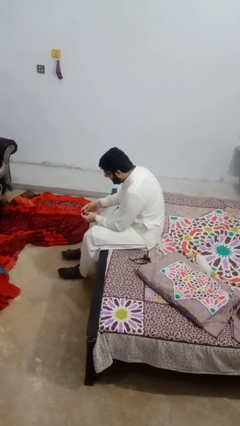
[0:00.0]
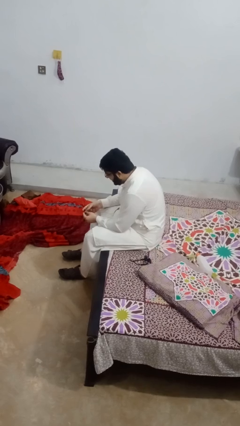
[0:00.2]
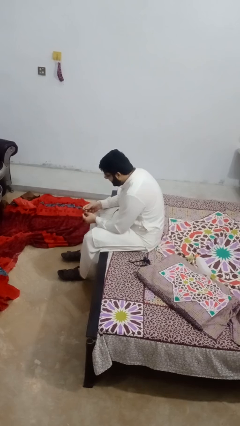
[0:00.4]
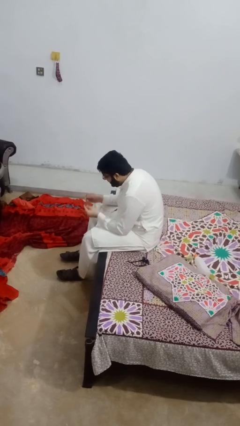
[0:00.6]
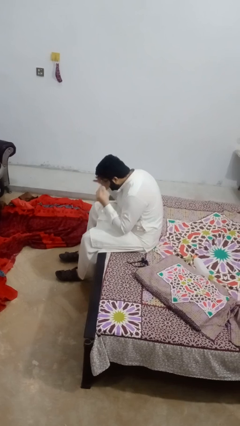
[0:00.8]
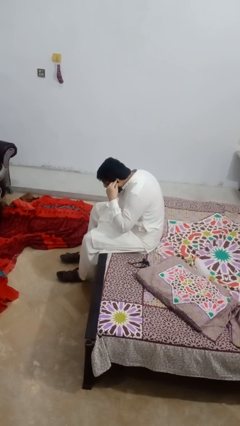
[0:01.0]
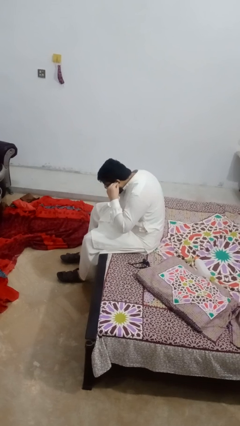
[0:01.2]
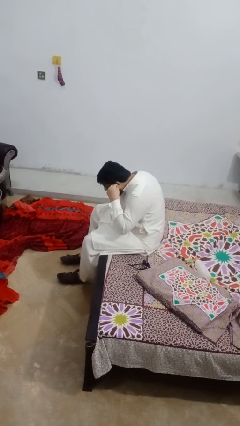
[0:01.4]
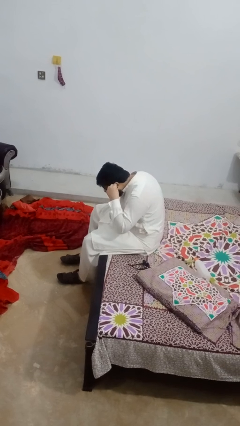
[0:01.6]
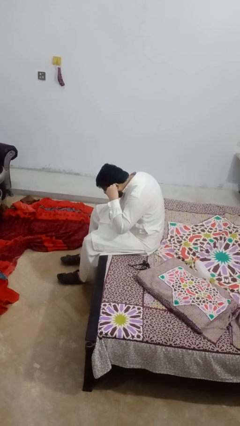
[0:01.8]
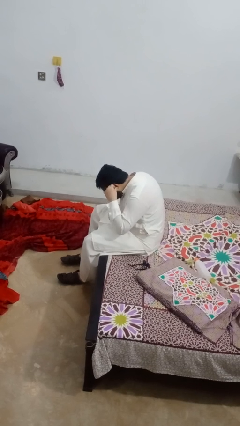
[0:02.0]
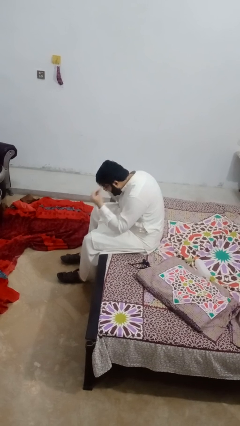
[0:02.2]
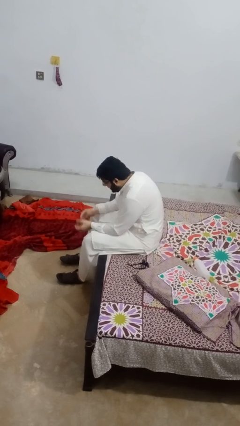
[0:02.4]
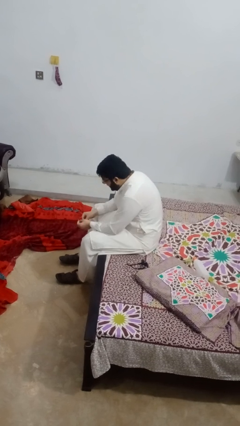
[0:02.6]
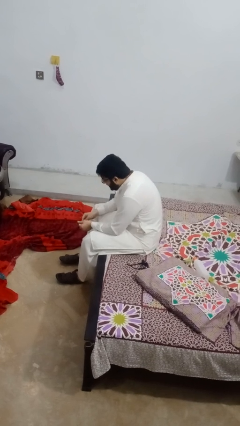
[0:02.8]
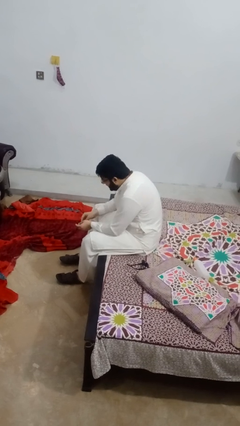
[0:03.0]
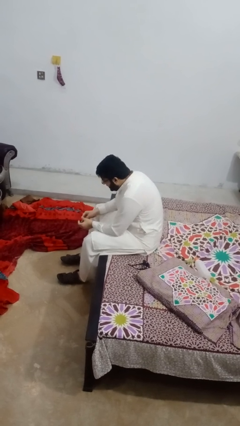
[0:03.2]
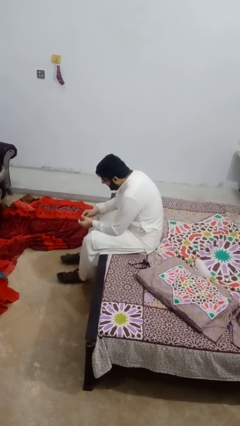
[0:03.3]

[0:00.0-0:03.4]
person puts on headphones

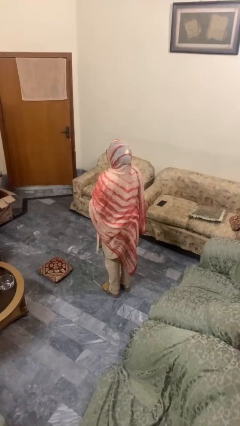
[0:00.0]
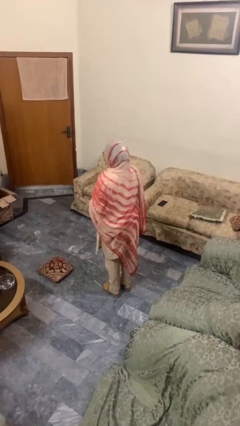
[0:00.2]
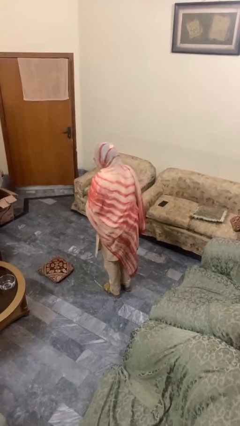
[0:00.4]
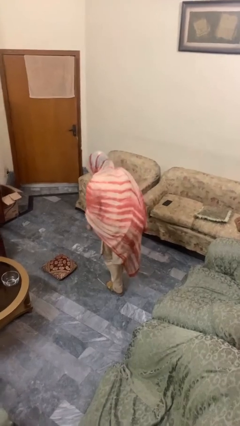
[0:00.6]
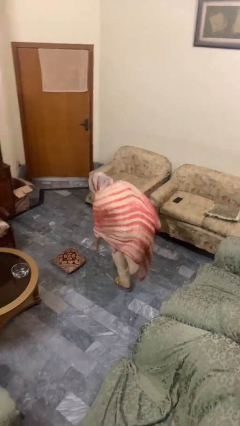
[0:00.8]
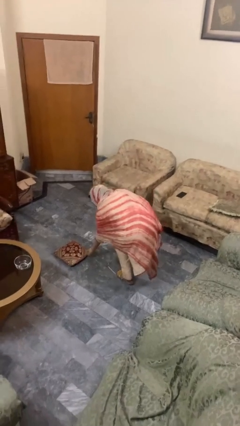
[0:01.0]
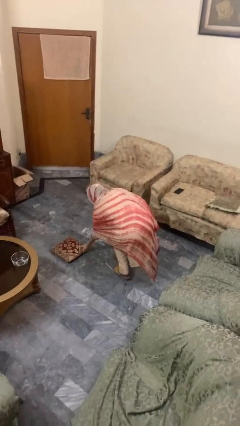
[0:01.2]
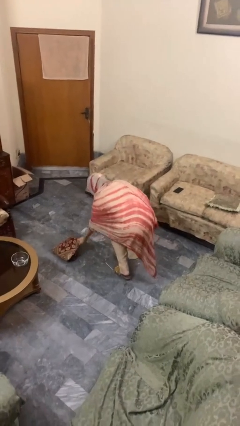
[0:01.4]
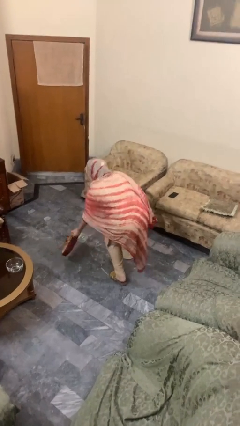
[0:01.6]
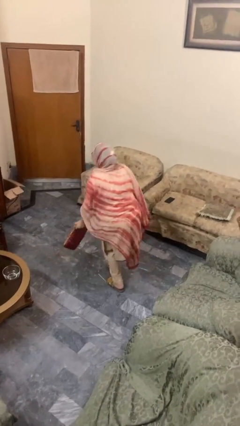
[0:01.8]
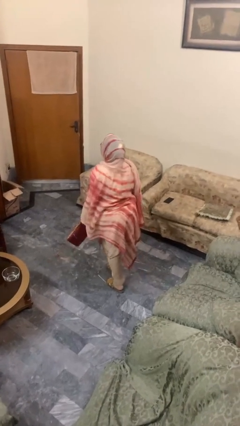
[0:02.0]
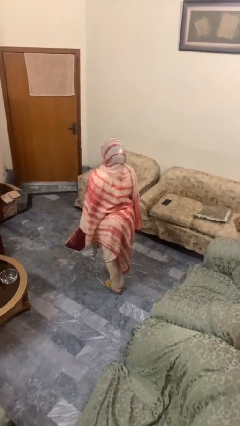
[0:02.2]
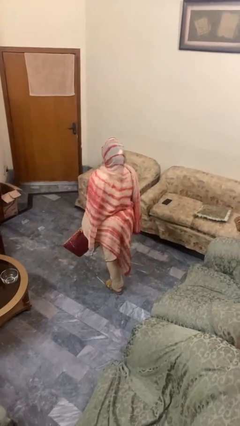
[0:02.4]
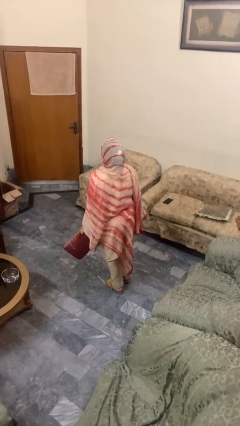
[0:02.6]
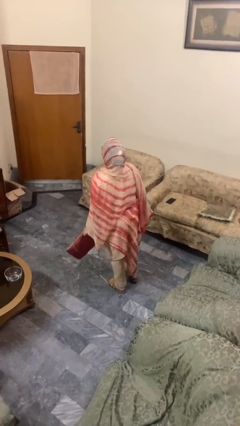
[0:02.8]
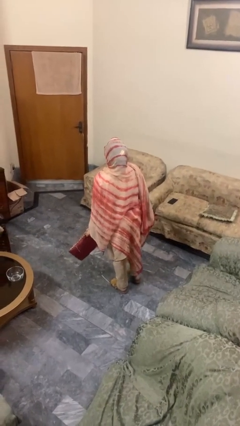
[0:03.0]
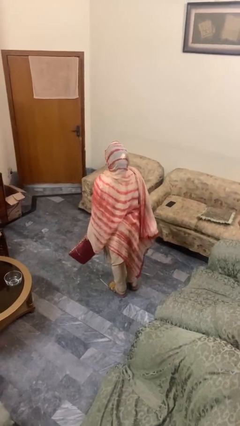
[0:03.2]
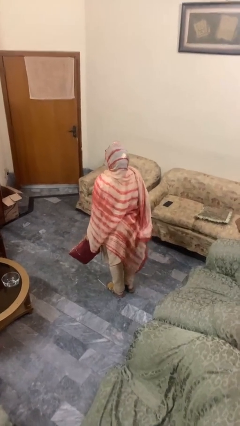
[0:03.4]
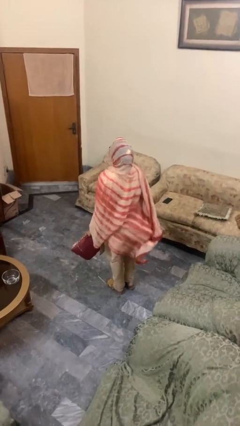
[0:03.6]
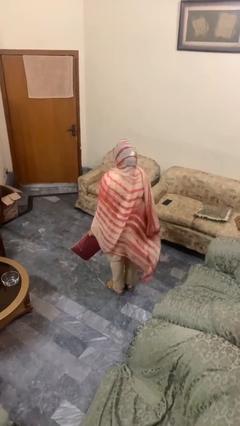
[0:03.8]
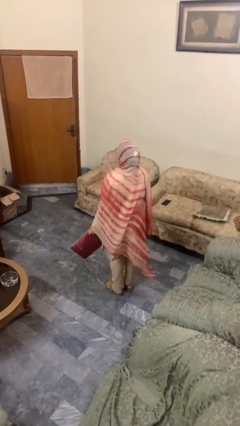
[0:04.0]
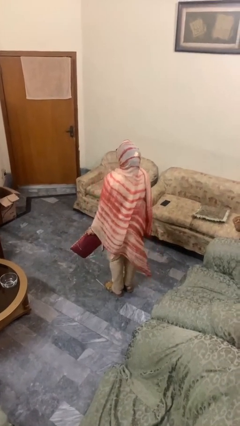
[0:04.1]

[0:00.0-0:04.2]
person picks up object from floor

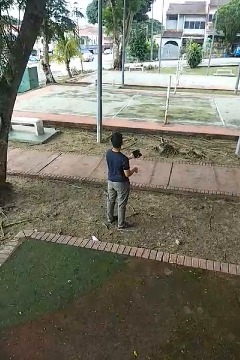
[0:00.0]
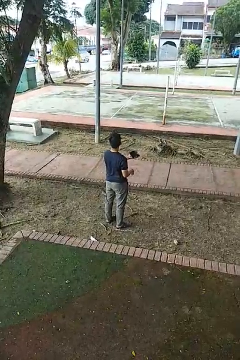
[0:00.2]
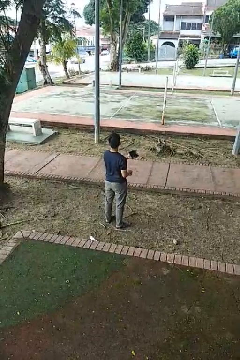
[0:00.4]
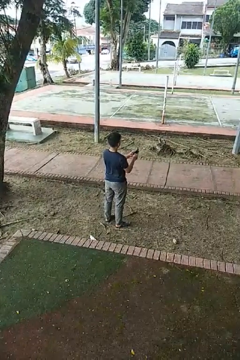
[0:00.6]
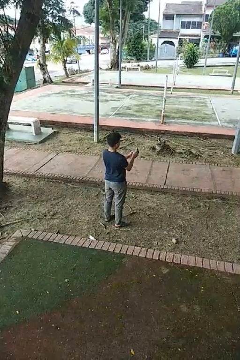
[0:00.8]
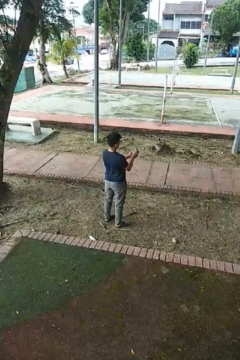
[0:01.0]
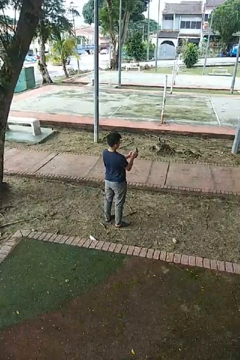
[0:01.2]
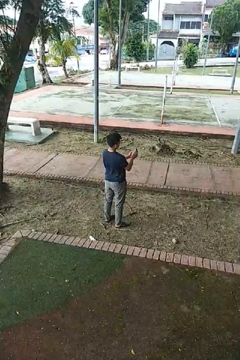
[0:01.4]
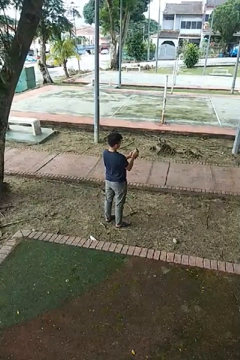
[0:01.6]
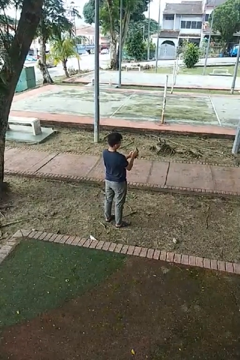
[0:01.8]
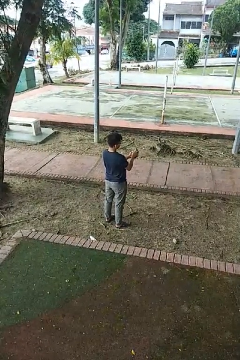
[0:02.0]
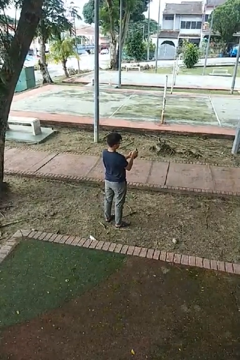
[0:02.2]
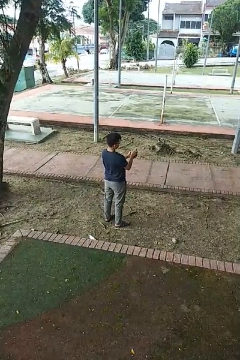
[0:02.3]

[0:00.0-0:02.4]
person searches in purse

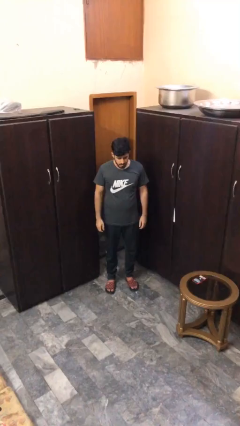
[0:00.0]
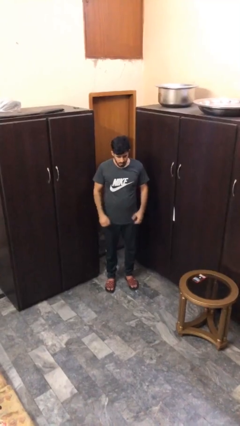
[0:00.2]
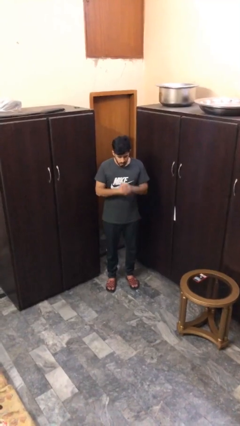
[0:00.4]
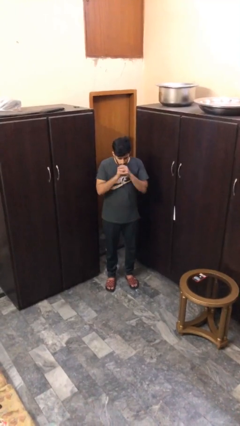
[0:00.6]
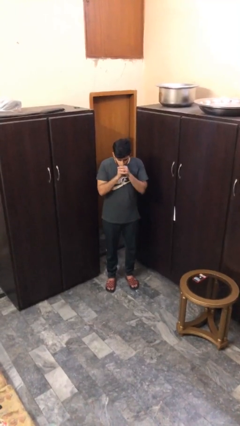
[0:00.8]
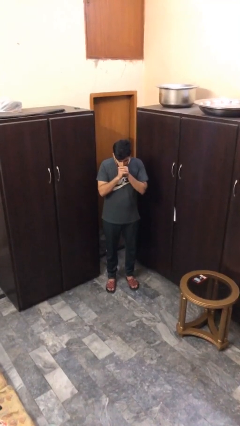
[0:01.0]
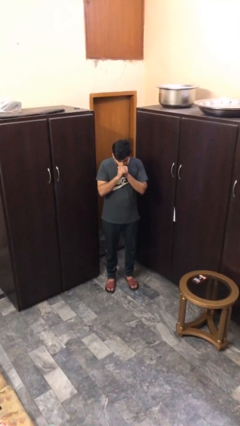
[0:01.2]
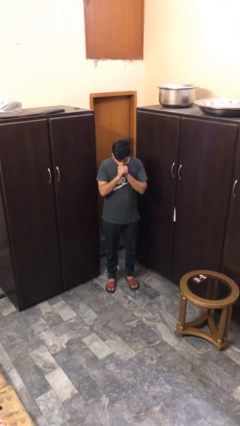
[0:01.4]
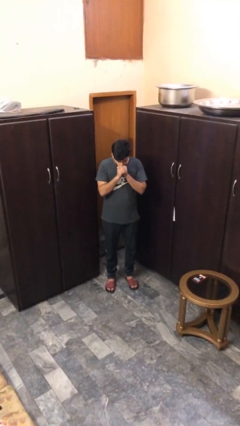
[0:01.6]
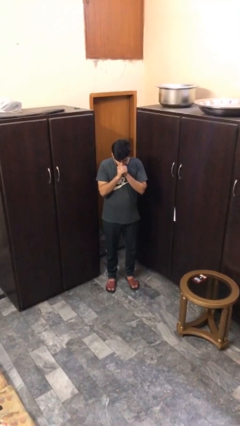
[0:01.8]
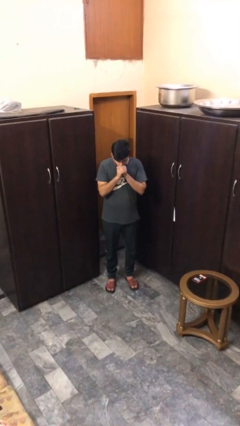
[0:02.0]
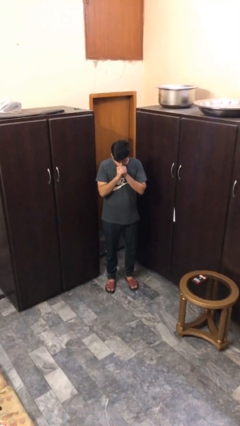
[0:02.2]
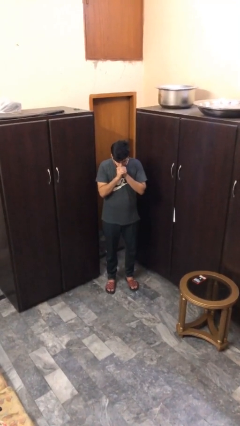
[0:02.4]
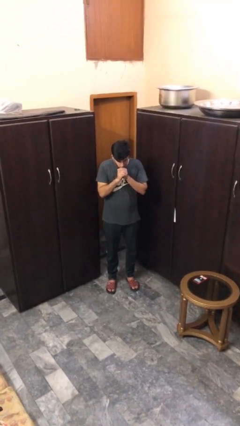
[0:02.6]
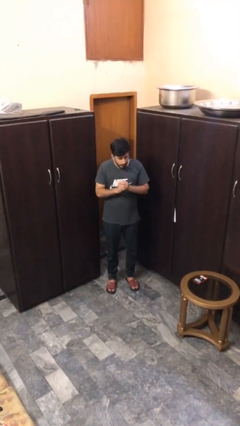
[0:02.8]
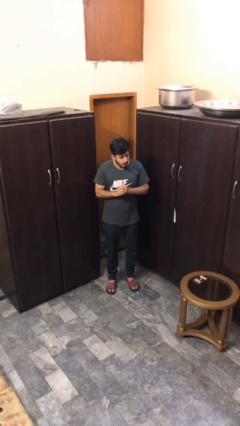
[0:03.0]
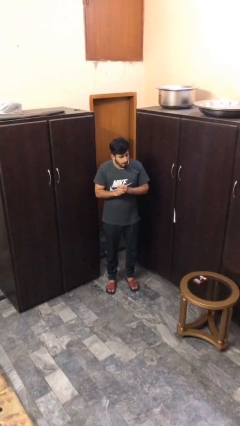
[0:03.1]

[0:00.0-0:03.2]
person blows into hands

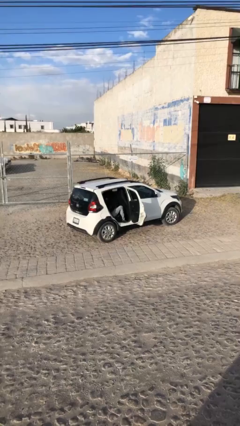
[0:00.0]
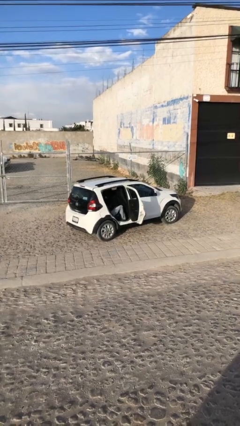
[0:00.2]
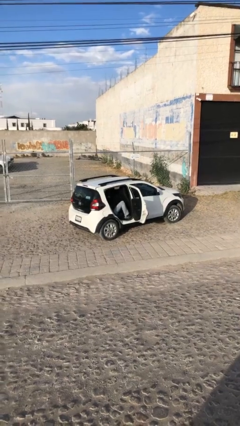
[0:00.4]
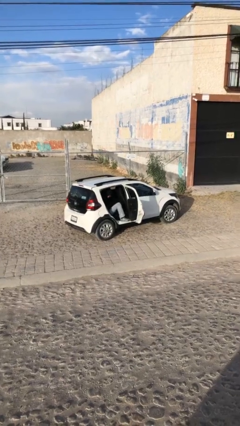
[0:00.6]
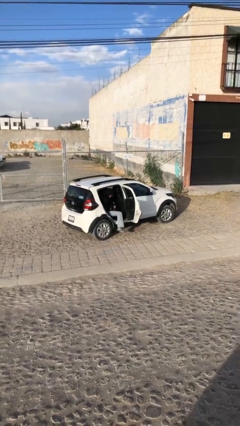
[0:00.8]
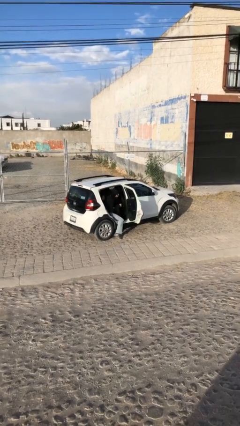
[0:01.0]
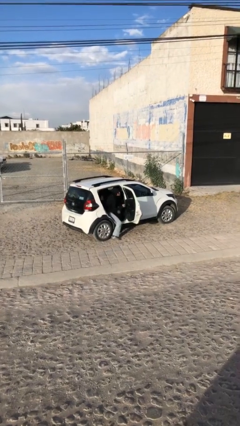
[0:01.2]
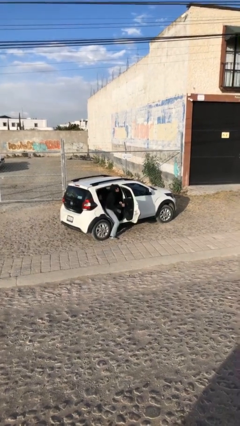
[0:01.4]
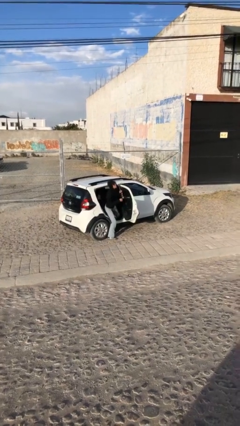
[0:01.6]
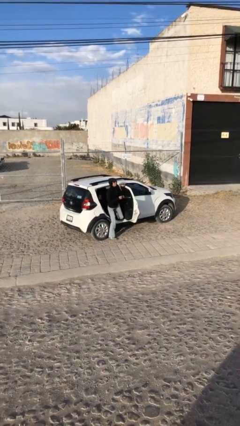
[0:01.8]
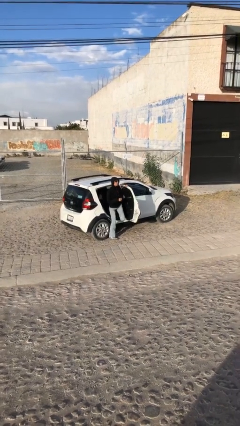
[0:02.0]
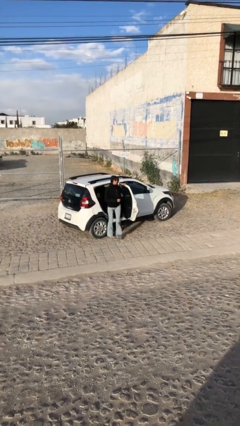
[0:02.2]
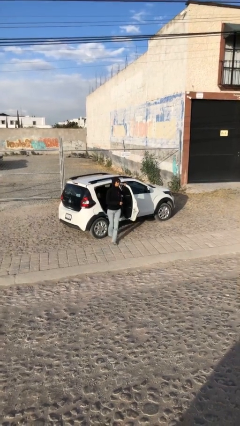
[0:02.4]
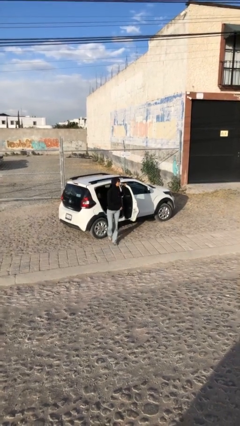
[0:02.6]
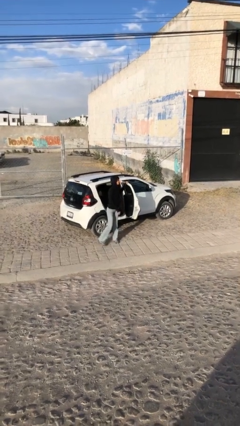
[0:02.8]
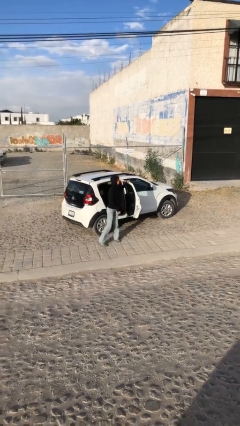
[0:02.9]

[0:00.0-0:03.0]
person exits car

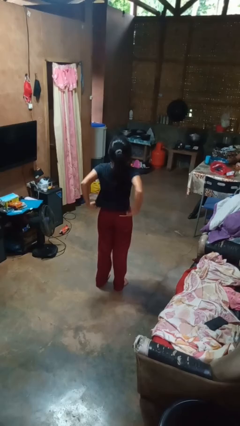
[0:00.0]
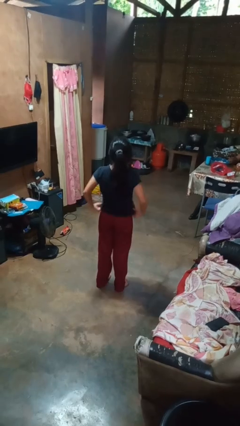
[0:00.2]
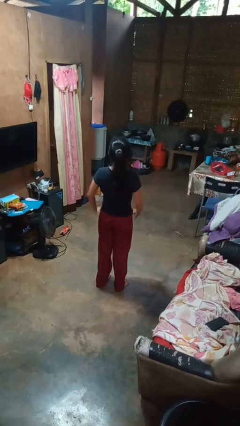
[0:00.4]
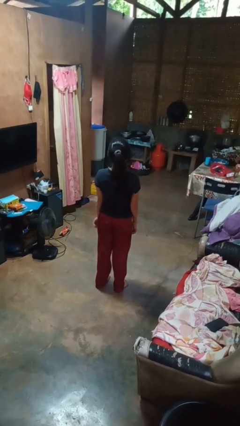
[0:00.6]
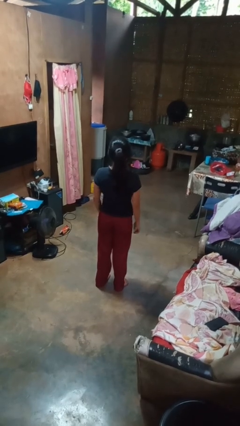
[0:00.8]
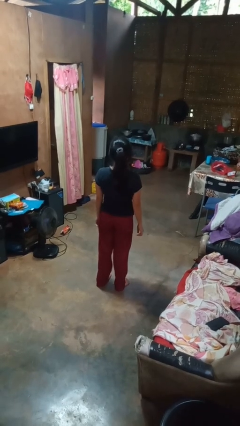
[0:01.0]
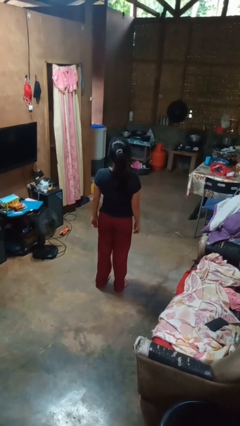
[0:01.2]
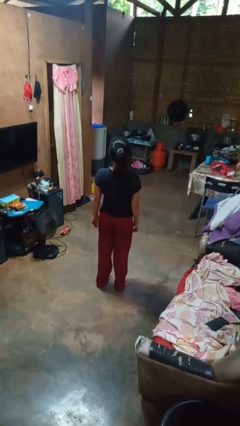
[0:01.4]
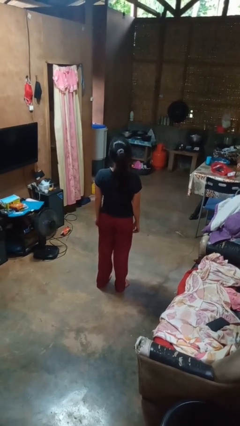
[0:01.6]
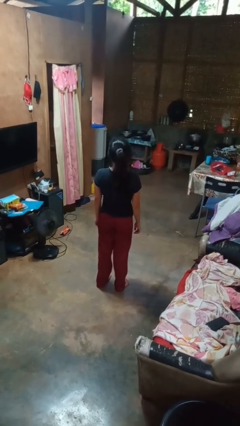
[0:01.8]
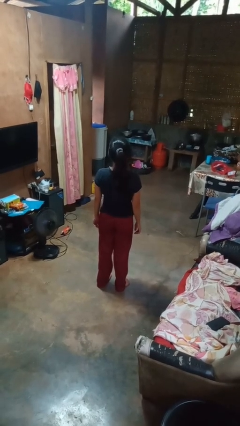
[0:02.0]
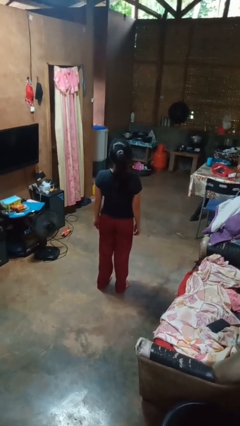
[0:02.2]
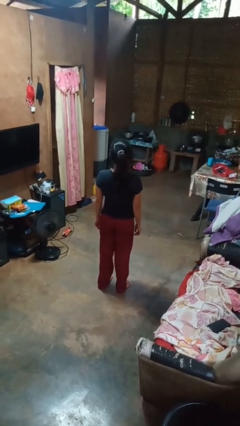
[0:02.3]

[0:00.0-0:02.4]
person untucks shirt
